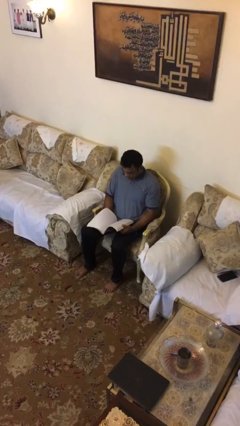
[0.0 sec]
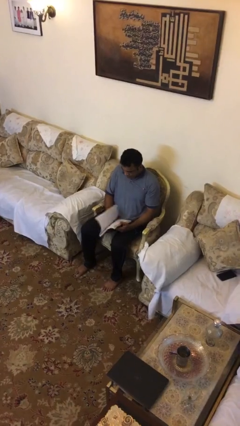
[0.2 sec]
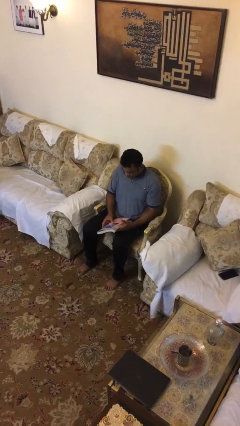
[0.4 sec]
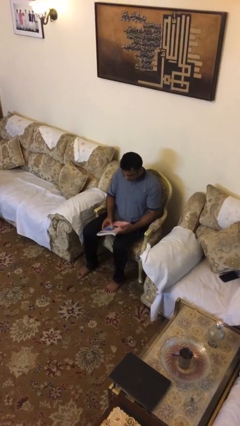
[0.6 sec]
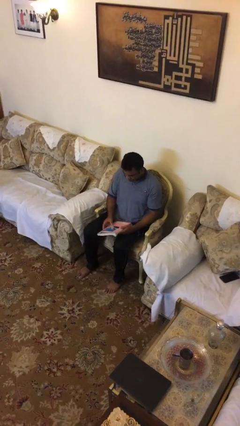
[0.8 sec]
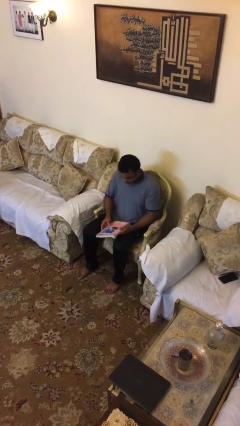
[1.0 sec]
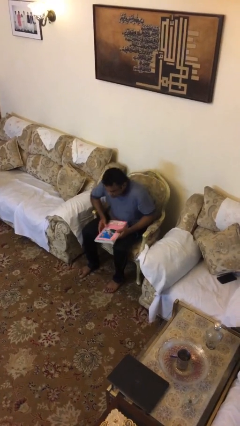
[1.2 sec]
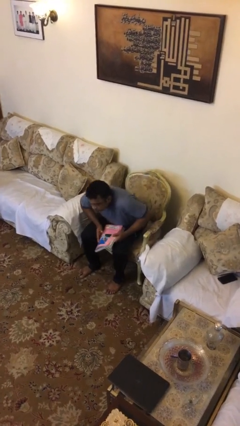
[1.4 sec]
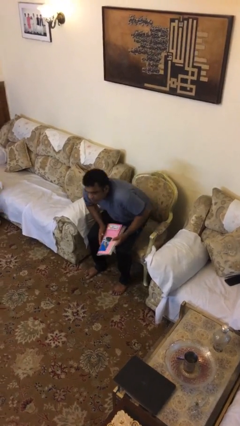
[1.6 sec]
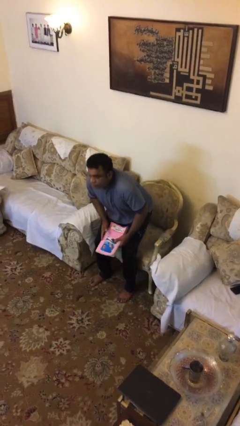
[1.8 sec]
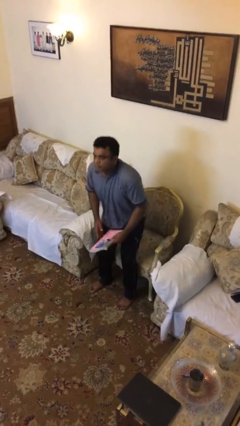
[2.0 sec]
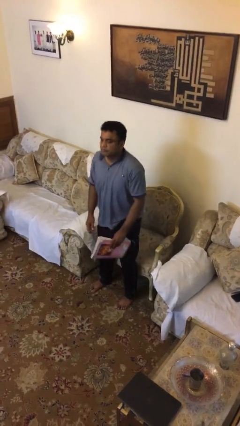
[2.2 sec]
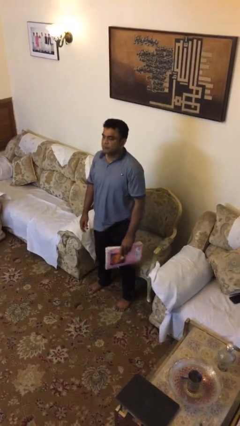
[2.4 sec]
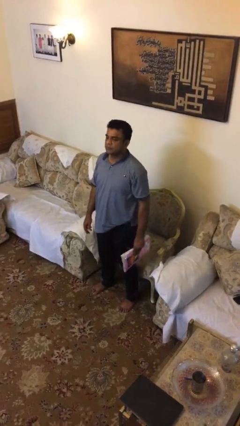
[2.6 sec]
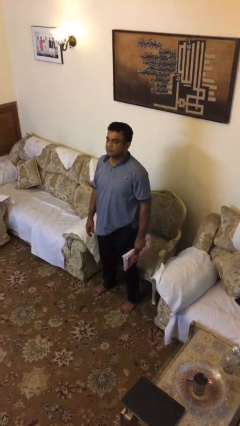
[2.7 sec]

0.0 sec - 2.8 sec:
person stands up

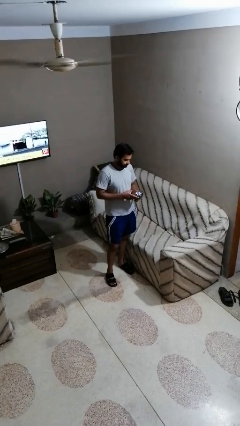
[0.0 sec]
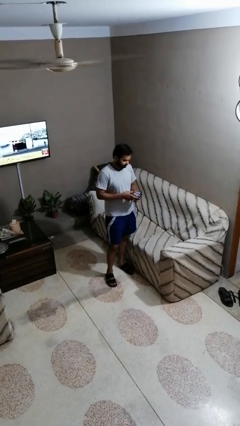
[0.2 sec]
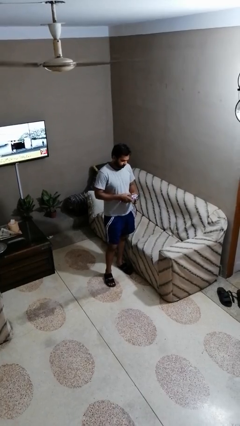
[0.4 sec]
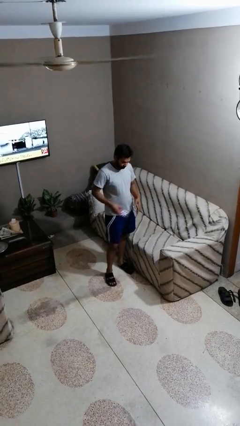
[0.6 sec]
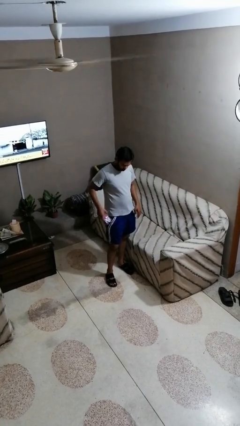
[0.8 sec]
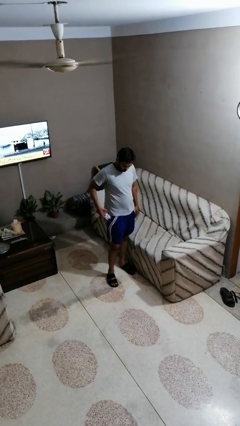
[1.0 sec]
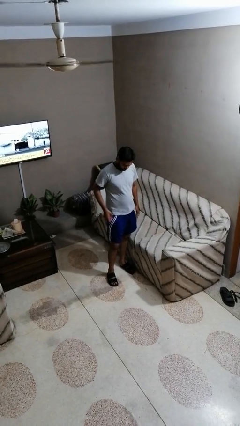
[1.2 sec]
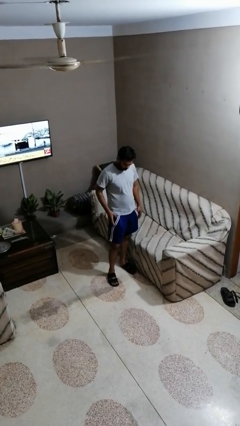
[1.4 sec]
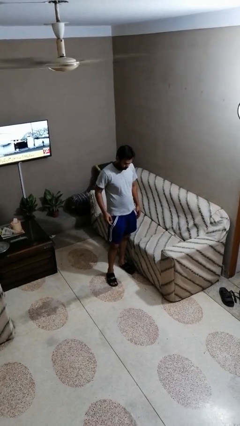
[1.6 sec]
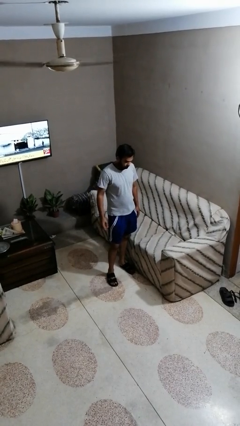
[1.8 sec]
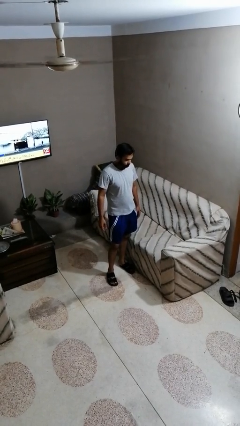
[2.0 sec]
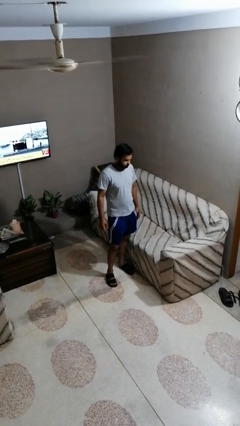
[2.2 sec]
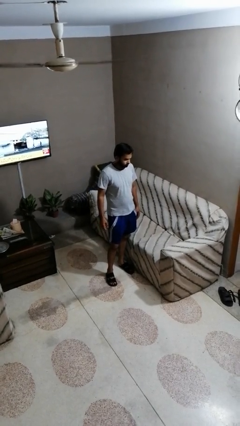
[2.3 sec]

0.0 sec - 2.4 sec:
person puts phone into pocket

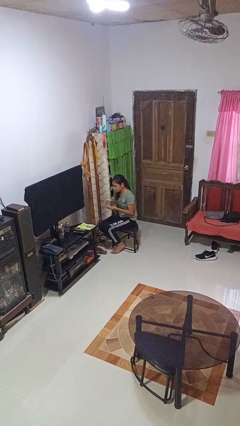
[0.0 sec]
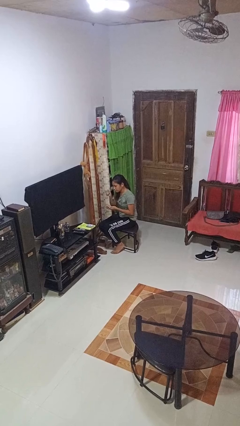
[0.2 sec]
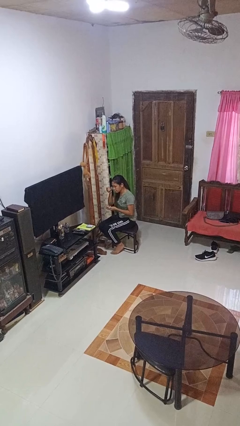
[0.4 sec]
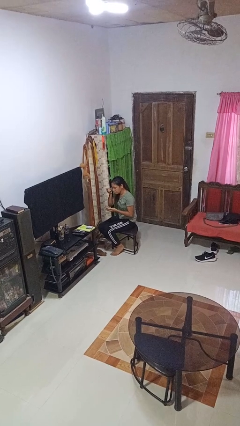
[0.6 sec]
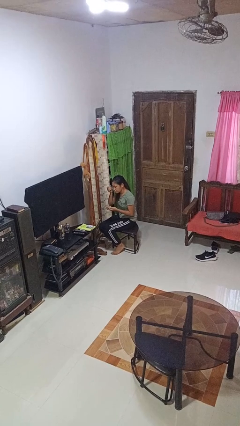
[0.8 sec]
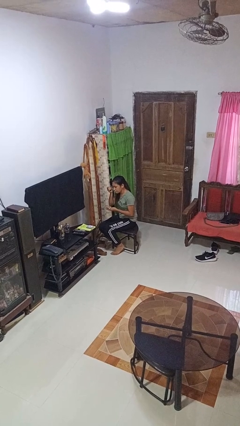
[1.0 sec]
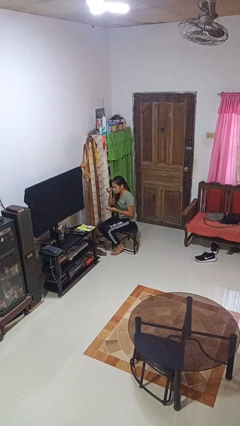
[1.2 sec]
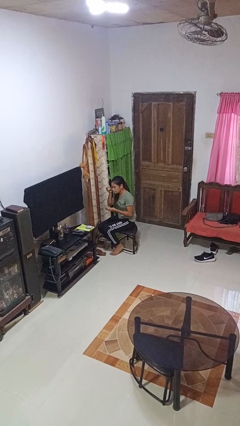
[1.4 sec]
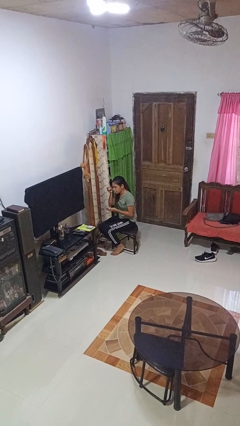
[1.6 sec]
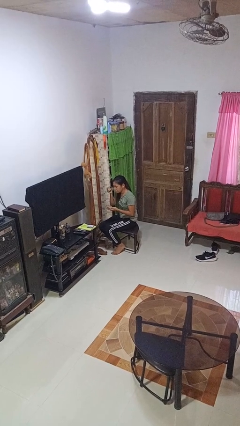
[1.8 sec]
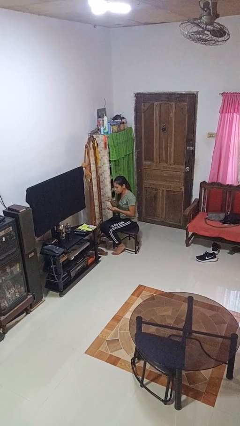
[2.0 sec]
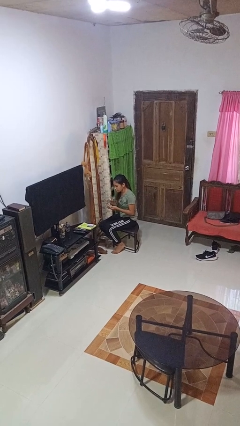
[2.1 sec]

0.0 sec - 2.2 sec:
person applies eye makeup

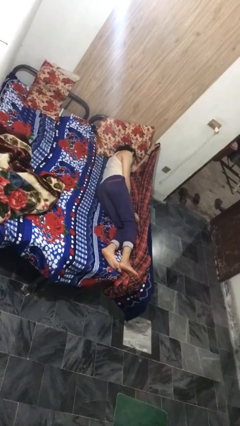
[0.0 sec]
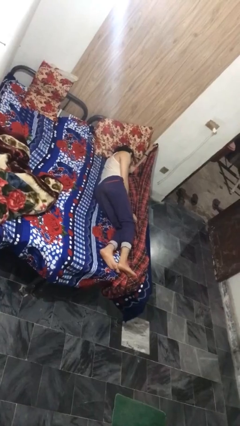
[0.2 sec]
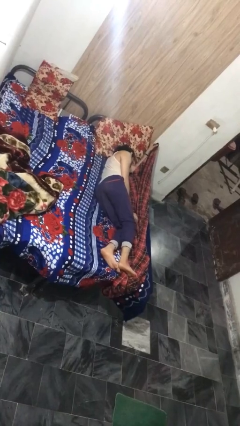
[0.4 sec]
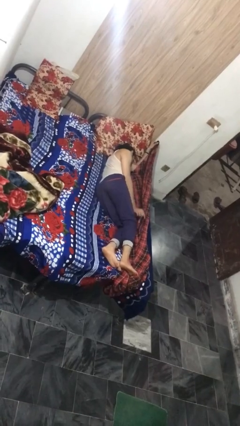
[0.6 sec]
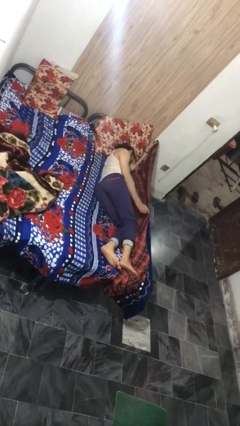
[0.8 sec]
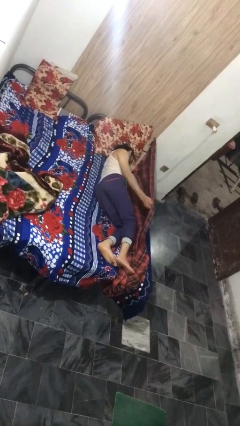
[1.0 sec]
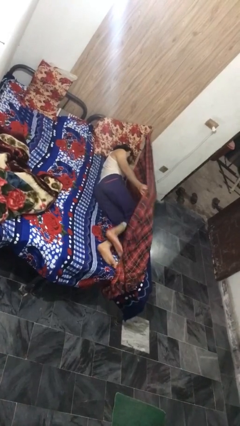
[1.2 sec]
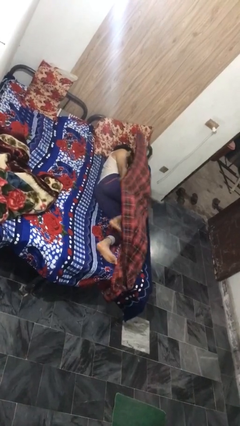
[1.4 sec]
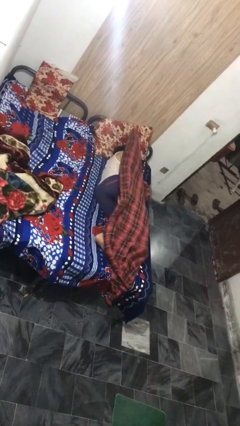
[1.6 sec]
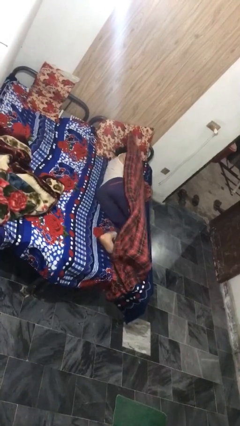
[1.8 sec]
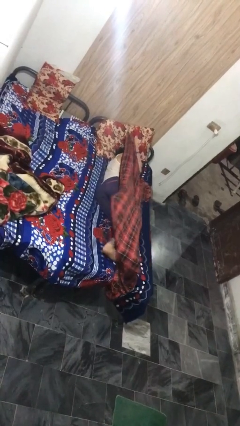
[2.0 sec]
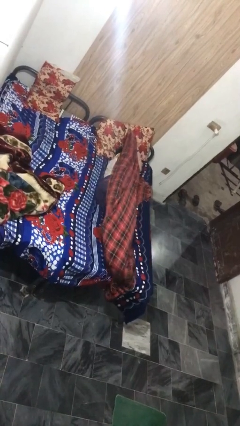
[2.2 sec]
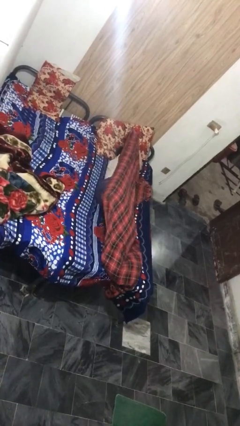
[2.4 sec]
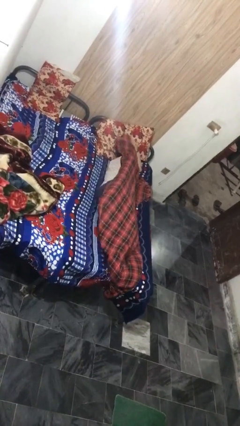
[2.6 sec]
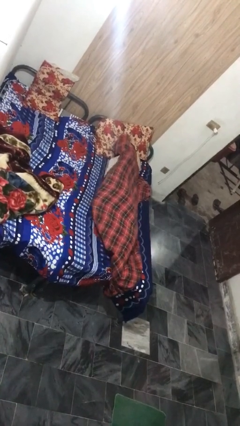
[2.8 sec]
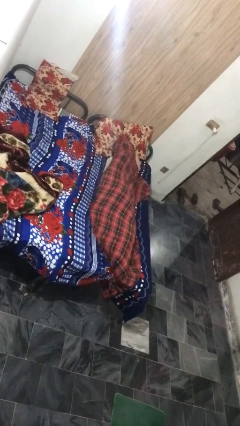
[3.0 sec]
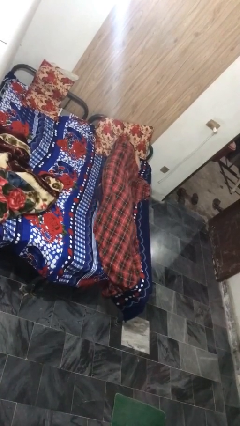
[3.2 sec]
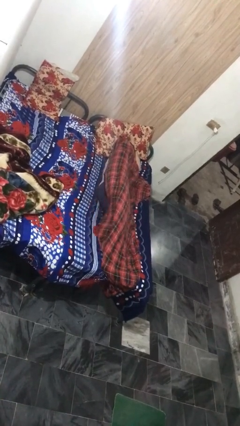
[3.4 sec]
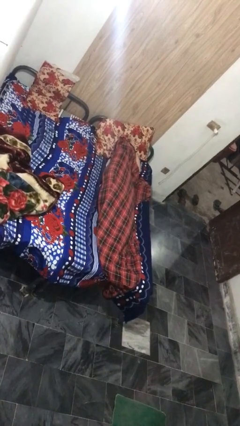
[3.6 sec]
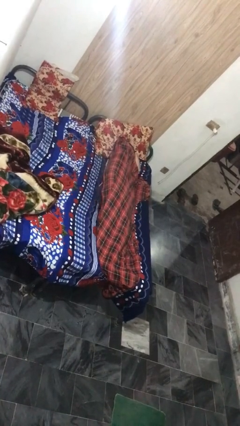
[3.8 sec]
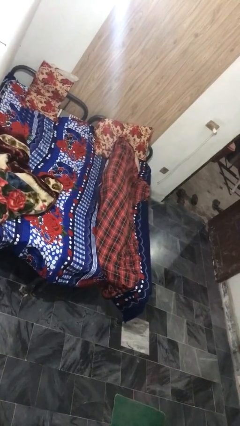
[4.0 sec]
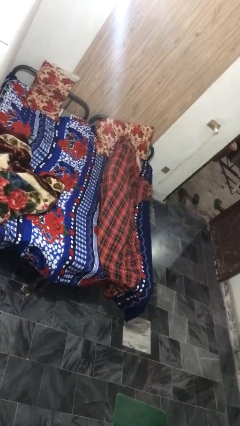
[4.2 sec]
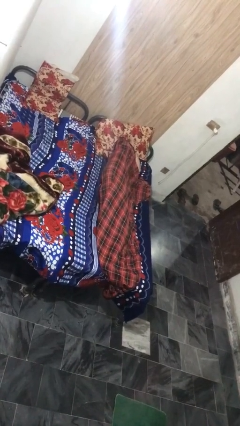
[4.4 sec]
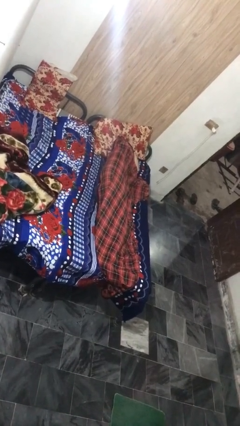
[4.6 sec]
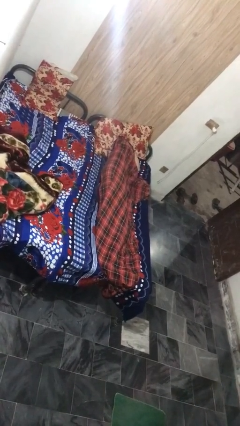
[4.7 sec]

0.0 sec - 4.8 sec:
person covers with bedsheets

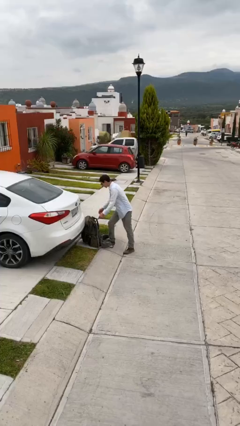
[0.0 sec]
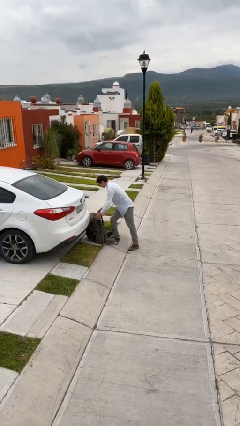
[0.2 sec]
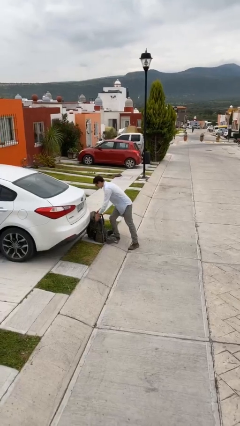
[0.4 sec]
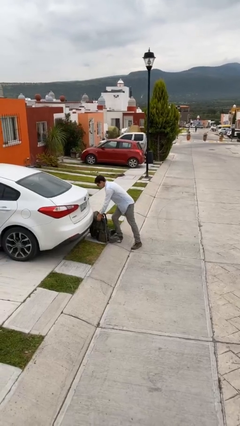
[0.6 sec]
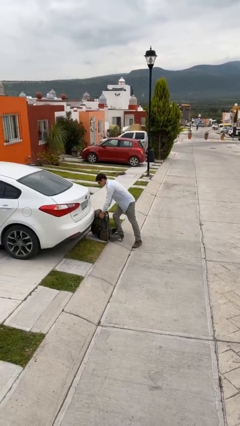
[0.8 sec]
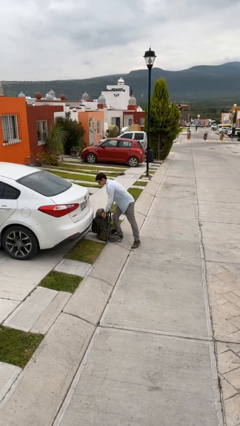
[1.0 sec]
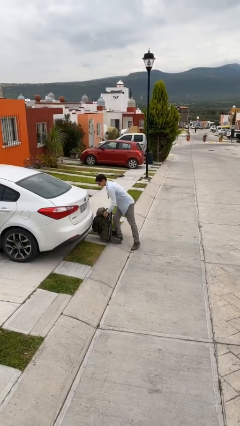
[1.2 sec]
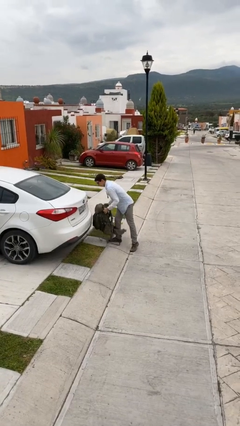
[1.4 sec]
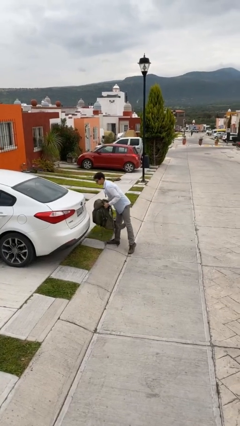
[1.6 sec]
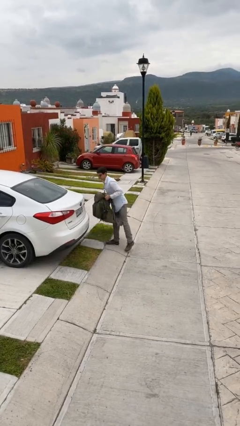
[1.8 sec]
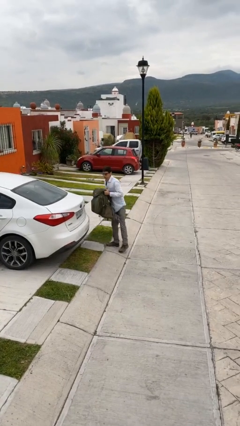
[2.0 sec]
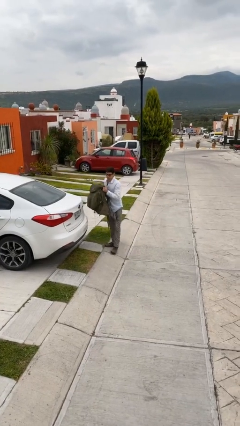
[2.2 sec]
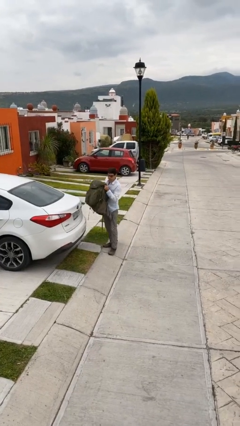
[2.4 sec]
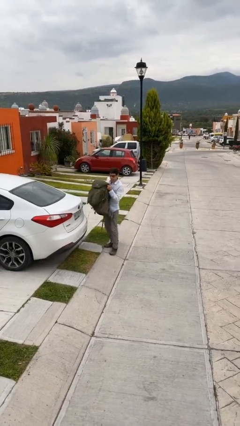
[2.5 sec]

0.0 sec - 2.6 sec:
person picks up object from floor

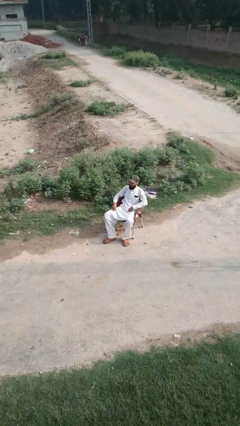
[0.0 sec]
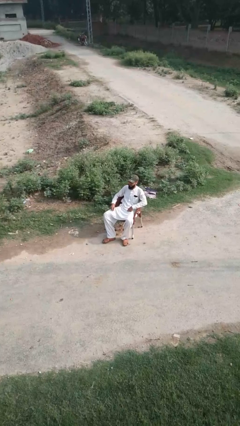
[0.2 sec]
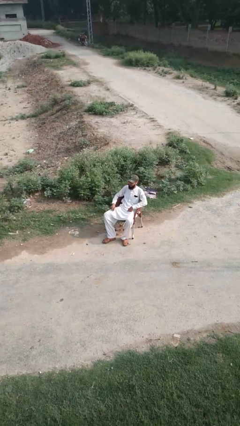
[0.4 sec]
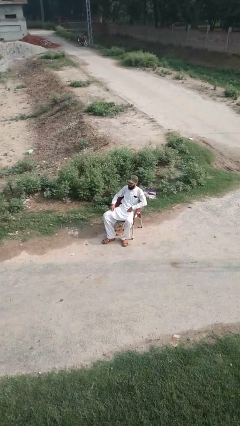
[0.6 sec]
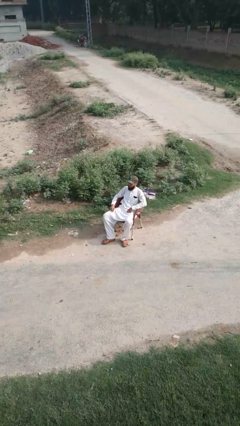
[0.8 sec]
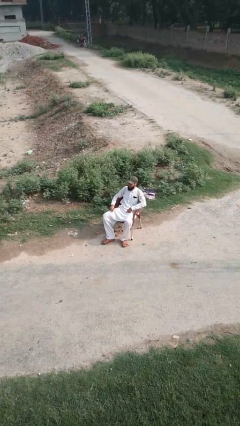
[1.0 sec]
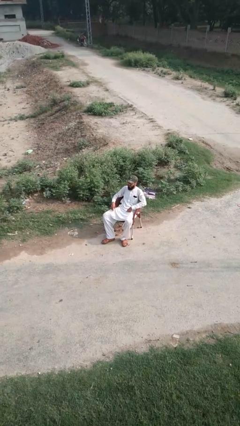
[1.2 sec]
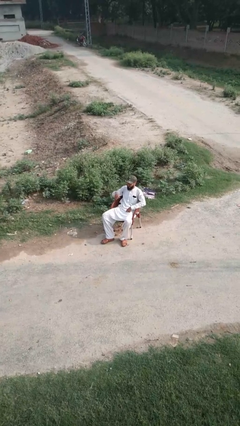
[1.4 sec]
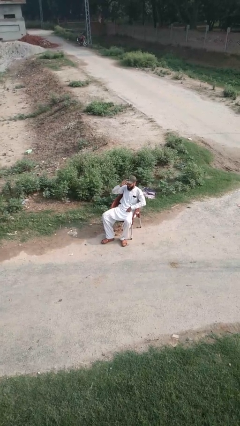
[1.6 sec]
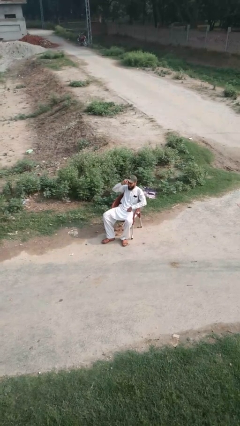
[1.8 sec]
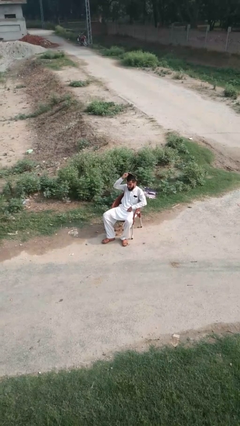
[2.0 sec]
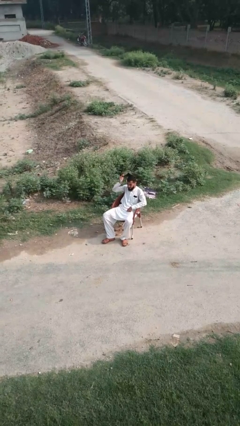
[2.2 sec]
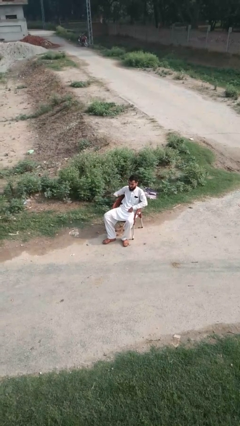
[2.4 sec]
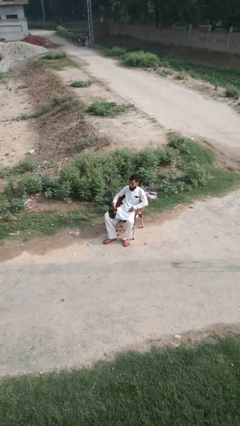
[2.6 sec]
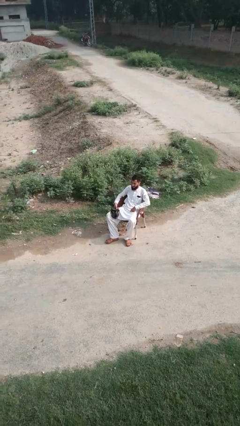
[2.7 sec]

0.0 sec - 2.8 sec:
person takes off hat
